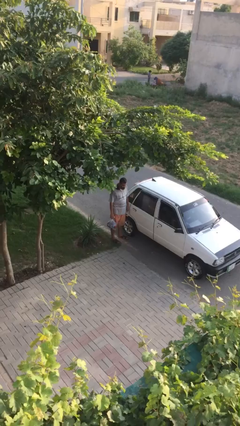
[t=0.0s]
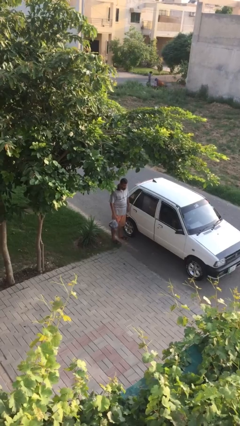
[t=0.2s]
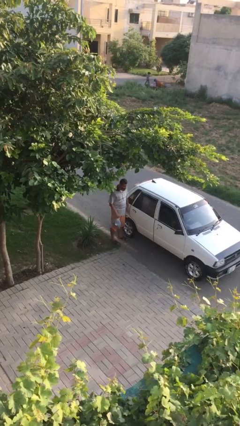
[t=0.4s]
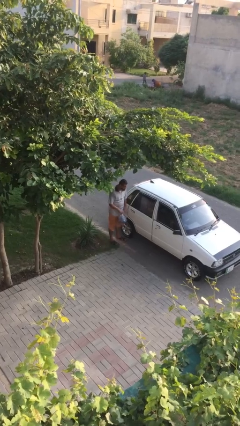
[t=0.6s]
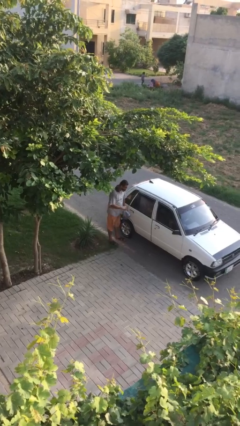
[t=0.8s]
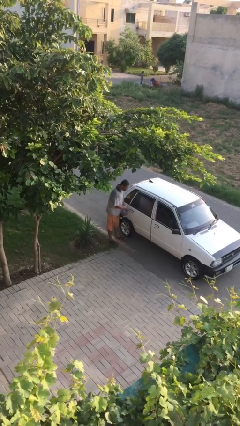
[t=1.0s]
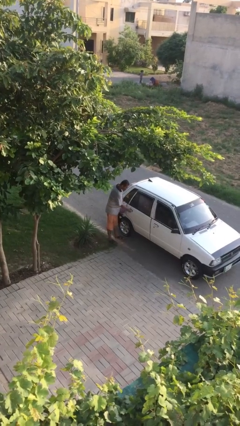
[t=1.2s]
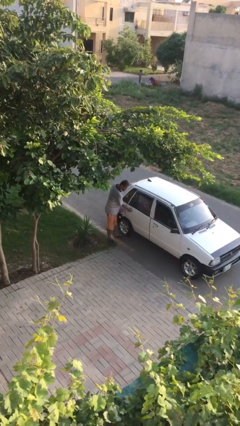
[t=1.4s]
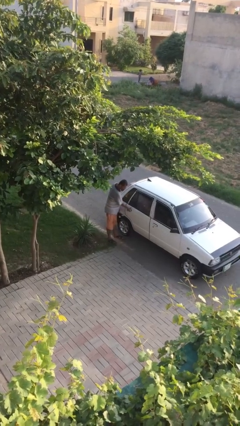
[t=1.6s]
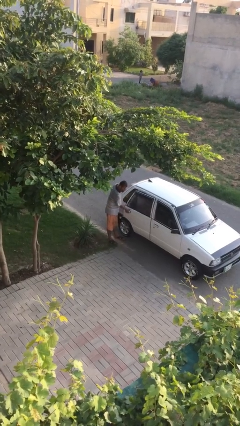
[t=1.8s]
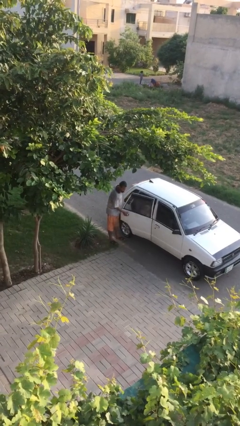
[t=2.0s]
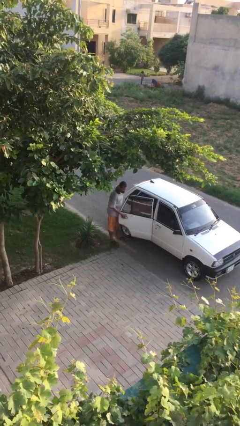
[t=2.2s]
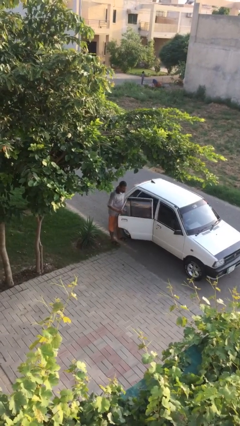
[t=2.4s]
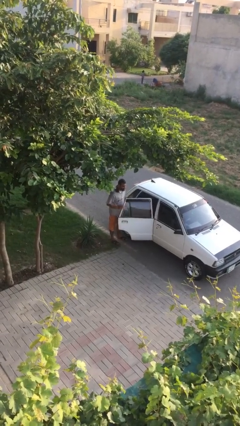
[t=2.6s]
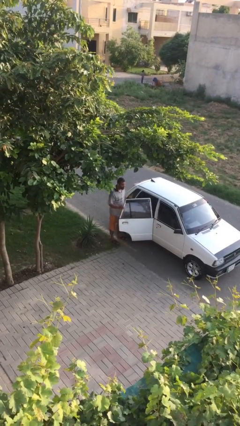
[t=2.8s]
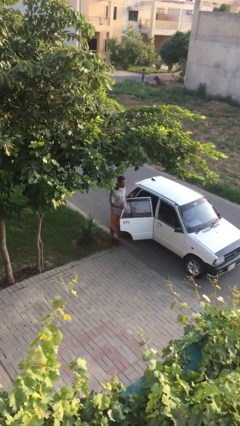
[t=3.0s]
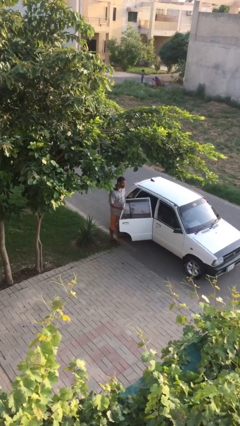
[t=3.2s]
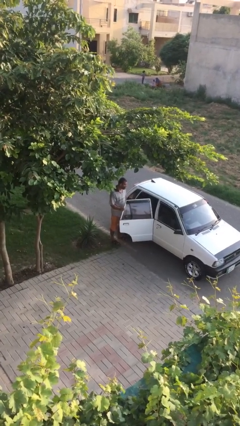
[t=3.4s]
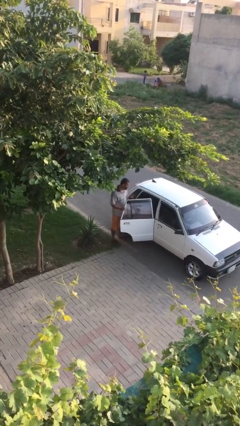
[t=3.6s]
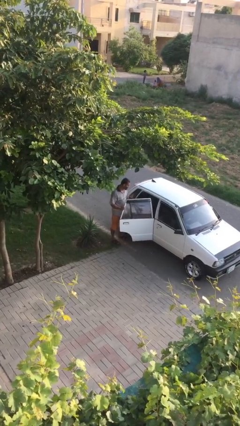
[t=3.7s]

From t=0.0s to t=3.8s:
person opens car door

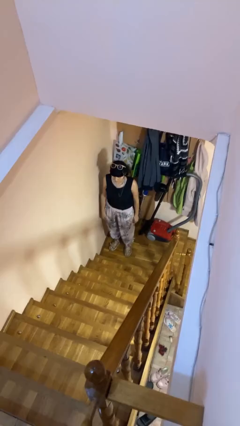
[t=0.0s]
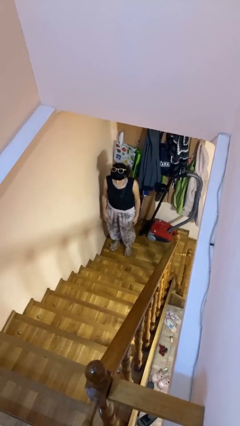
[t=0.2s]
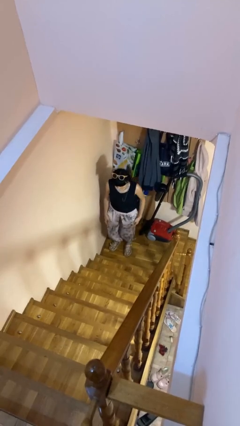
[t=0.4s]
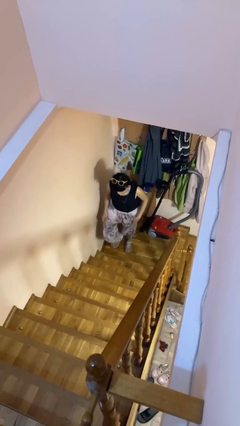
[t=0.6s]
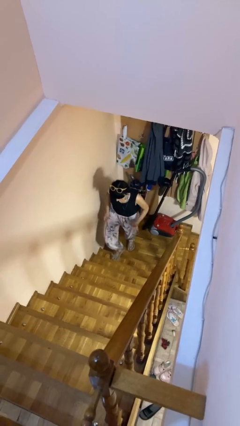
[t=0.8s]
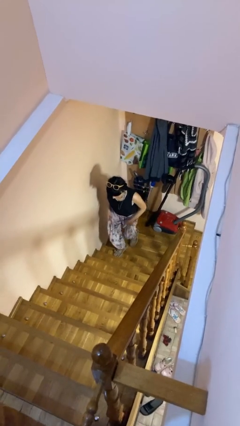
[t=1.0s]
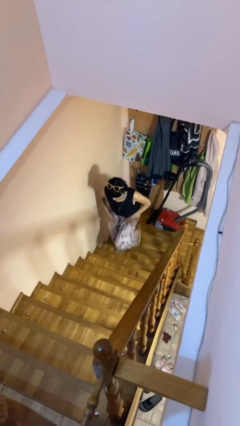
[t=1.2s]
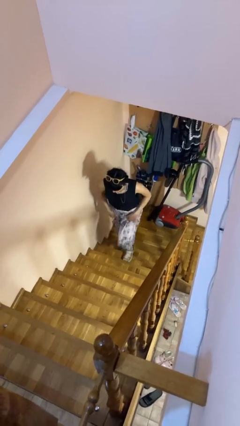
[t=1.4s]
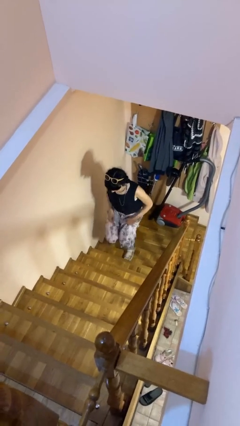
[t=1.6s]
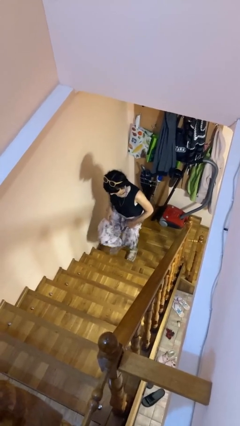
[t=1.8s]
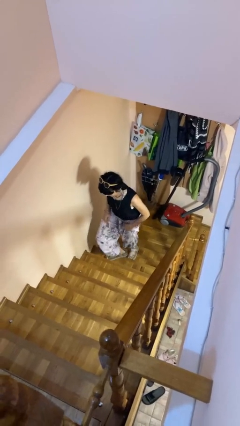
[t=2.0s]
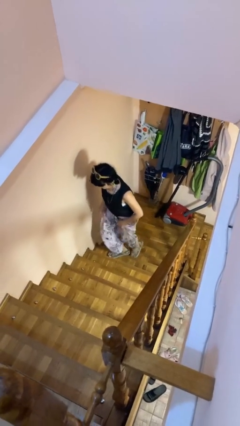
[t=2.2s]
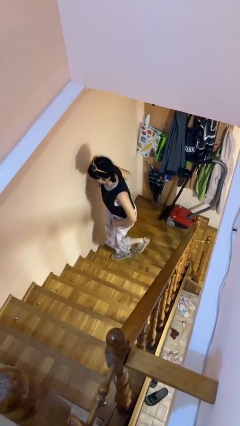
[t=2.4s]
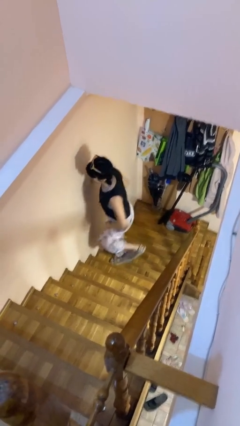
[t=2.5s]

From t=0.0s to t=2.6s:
person climbs up stairs

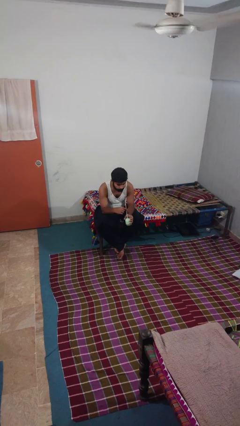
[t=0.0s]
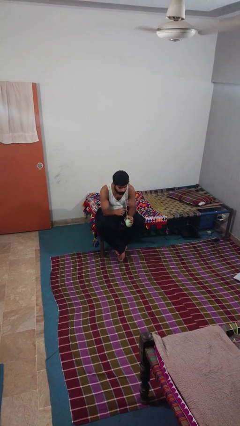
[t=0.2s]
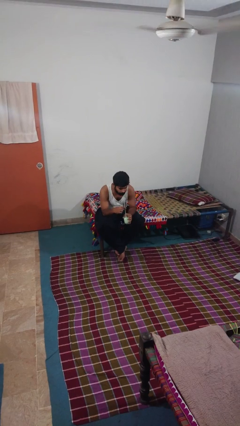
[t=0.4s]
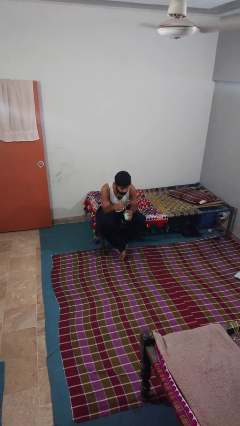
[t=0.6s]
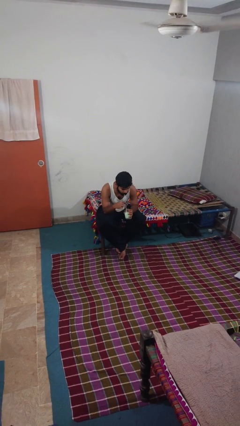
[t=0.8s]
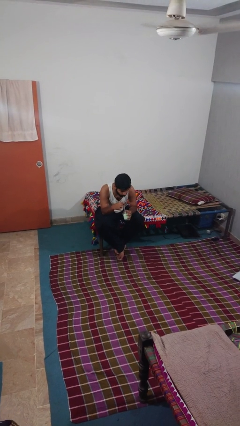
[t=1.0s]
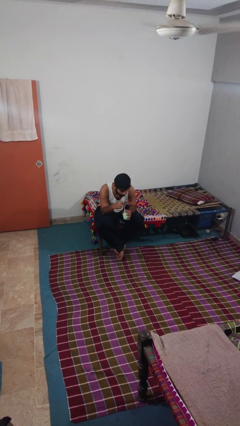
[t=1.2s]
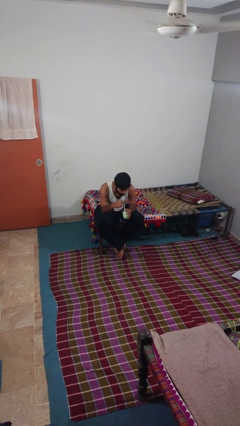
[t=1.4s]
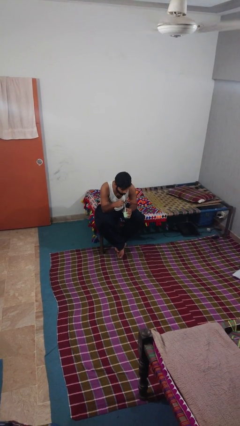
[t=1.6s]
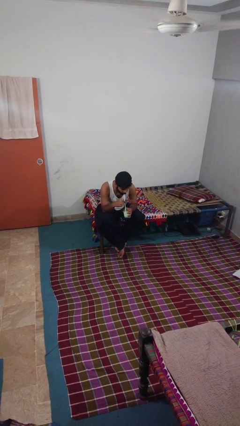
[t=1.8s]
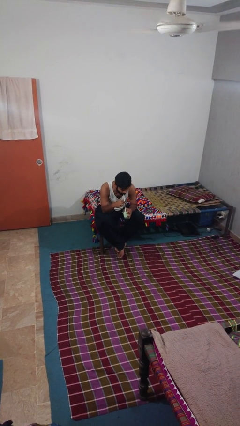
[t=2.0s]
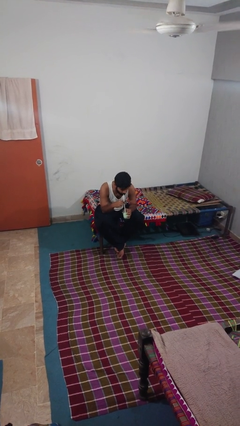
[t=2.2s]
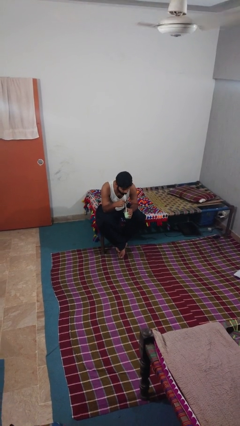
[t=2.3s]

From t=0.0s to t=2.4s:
person drinks from straw

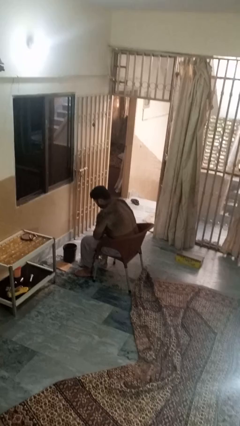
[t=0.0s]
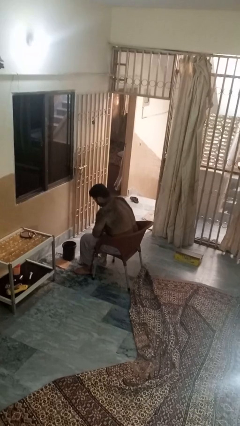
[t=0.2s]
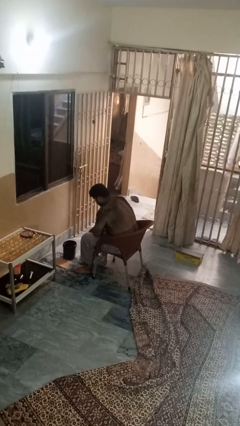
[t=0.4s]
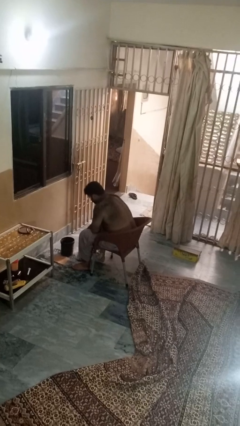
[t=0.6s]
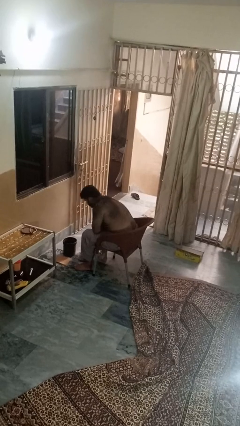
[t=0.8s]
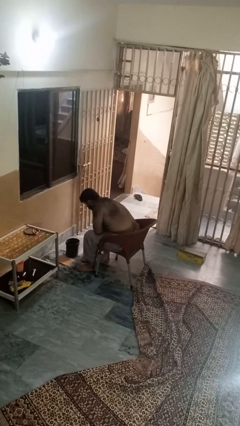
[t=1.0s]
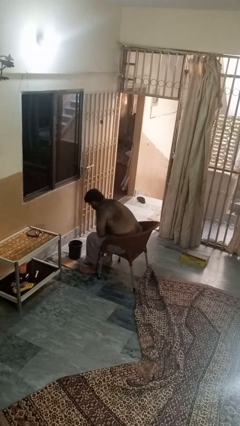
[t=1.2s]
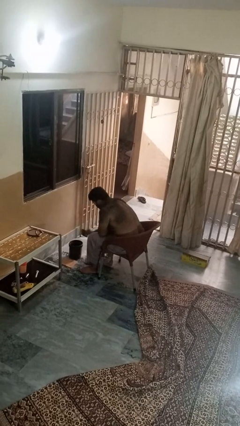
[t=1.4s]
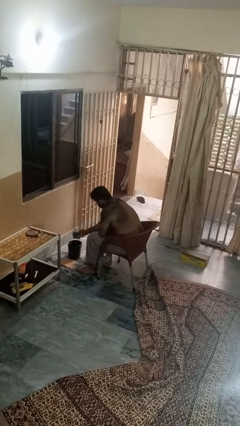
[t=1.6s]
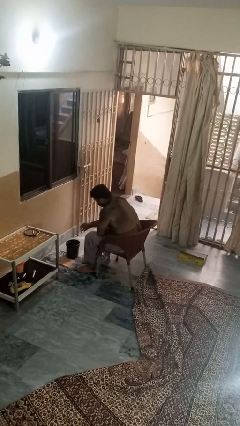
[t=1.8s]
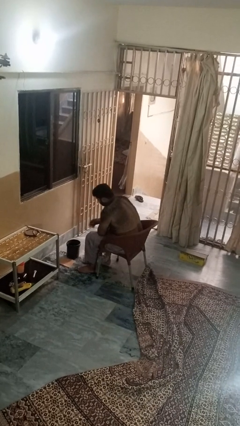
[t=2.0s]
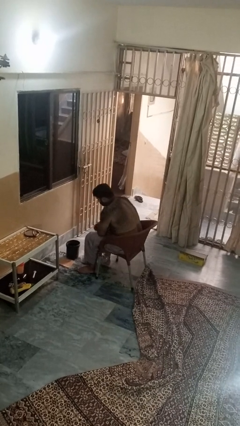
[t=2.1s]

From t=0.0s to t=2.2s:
person discards trash

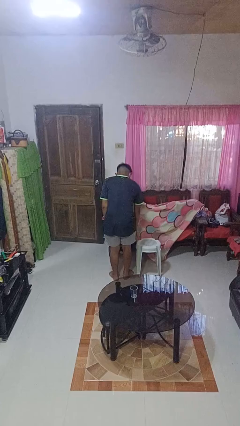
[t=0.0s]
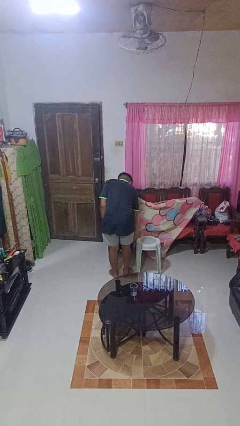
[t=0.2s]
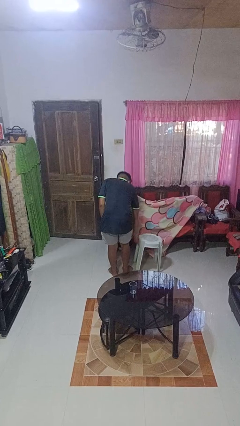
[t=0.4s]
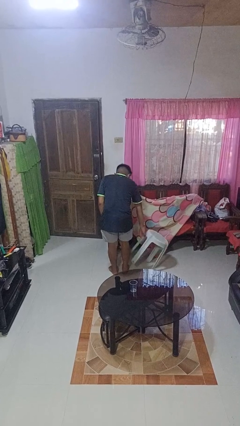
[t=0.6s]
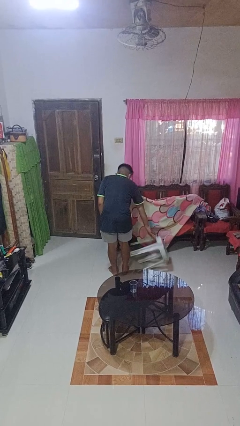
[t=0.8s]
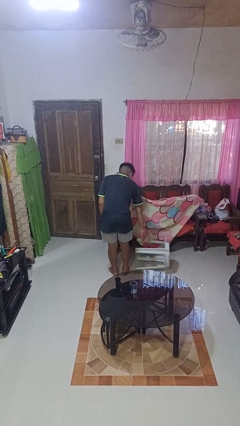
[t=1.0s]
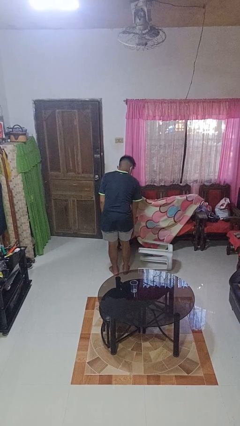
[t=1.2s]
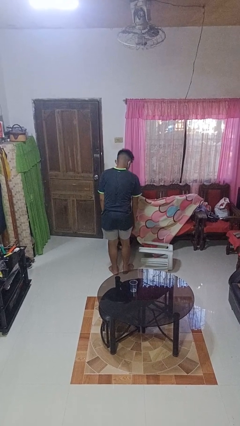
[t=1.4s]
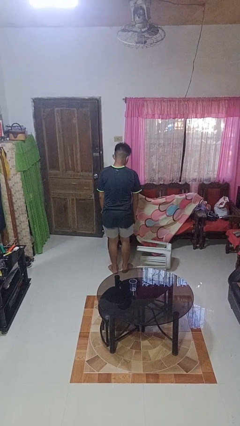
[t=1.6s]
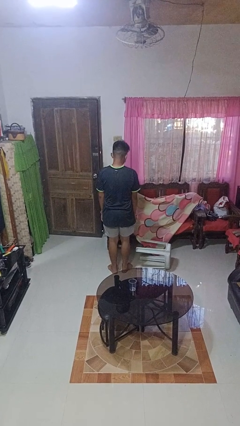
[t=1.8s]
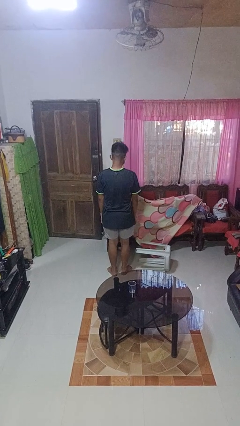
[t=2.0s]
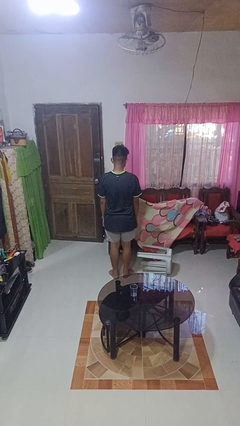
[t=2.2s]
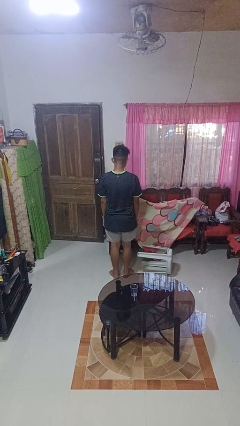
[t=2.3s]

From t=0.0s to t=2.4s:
person knocks over furniture

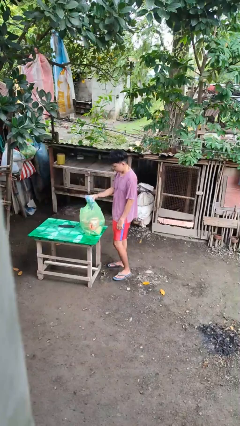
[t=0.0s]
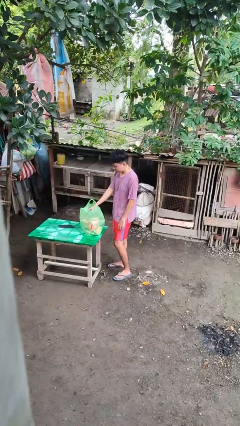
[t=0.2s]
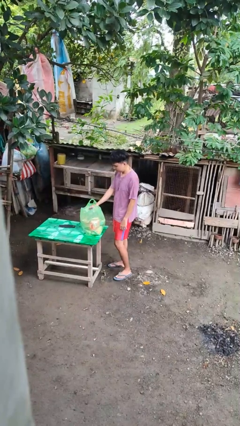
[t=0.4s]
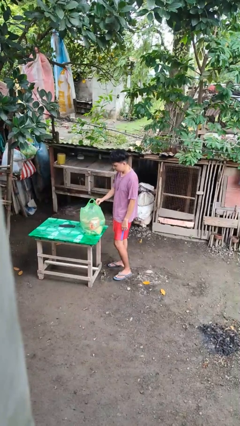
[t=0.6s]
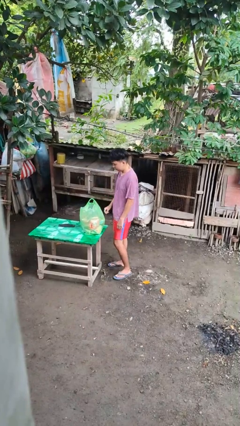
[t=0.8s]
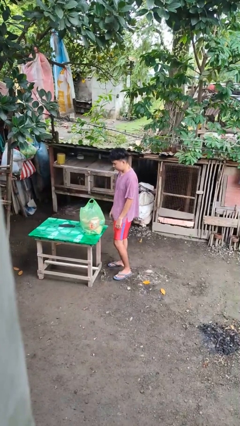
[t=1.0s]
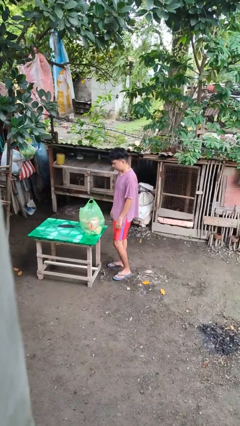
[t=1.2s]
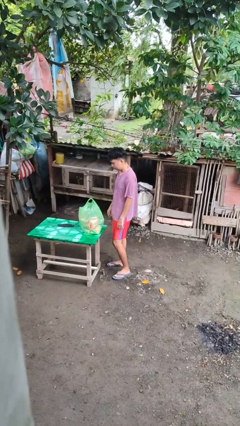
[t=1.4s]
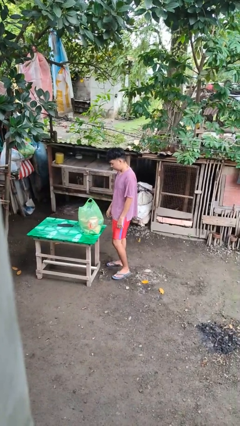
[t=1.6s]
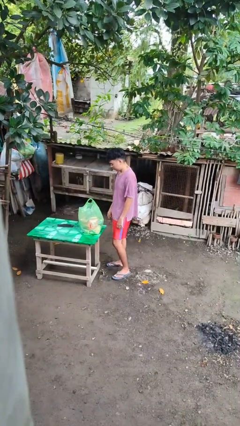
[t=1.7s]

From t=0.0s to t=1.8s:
person puts object into bag

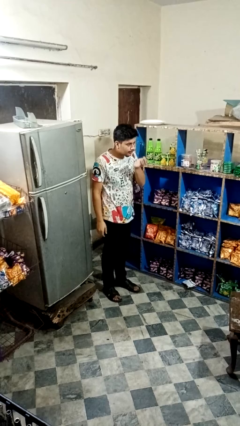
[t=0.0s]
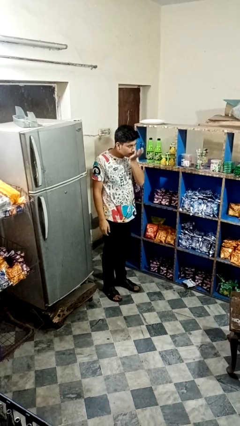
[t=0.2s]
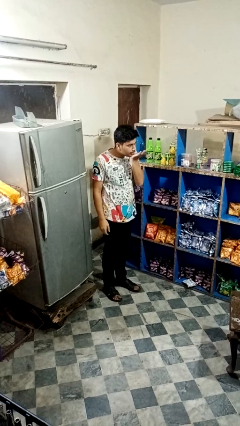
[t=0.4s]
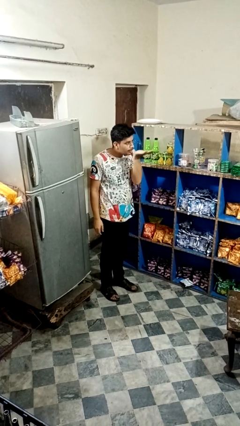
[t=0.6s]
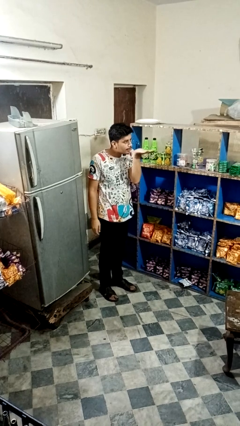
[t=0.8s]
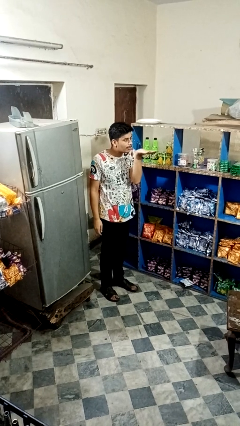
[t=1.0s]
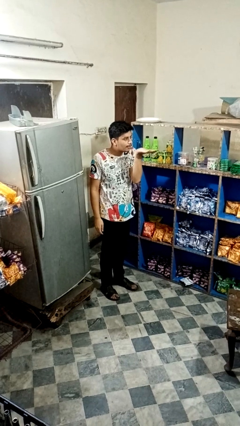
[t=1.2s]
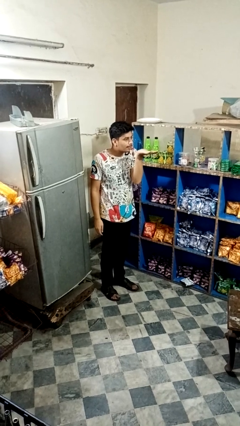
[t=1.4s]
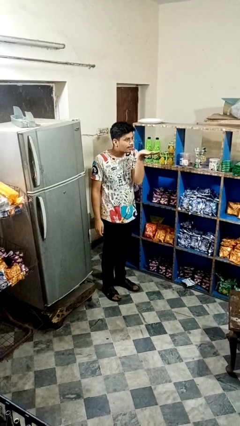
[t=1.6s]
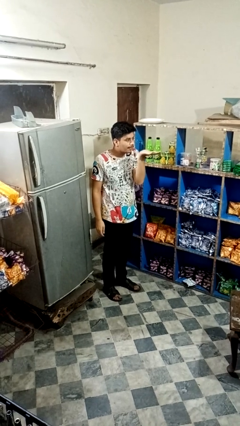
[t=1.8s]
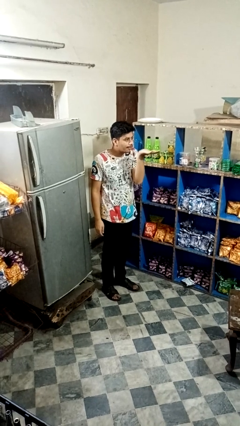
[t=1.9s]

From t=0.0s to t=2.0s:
person gestures blow kiss
